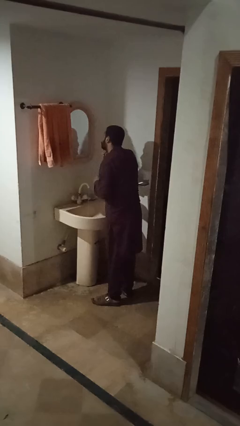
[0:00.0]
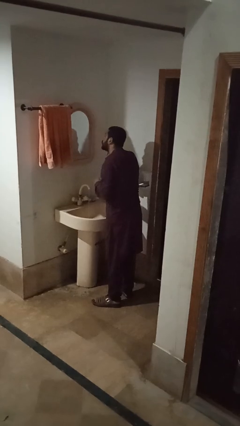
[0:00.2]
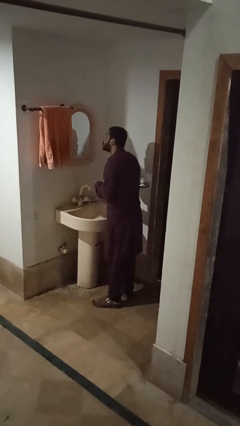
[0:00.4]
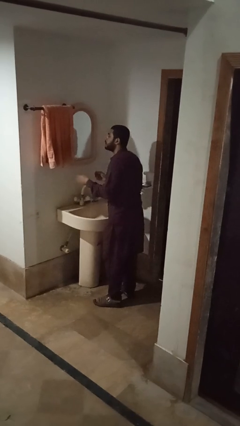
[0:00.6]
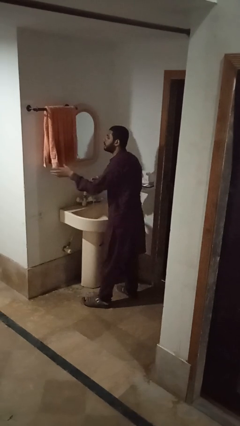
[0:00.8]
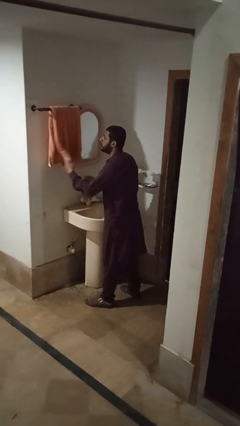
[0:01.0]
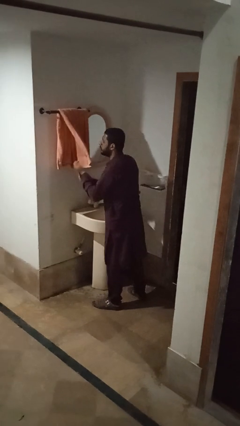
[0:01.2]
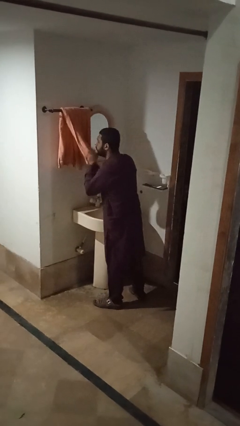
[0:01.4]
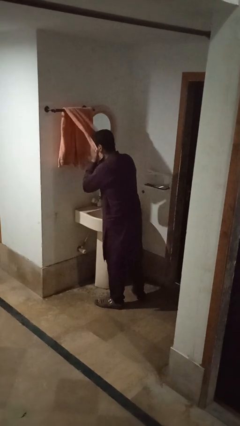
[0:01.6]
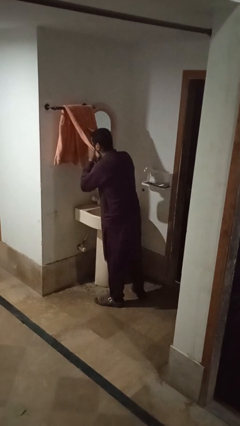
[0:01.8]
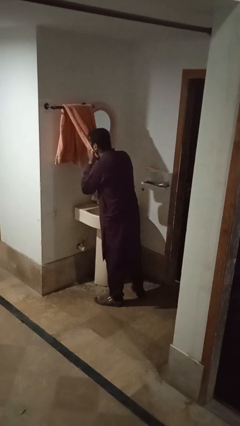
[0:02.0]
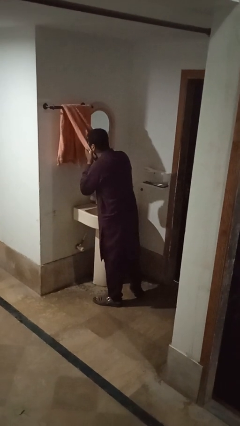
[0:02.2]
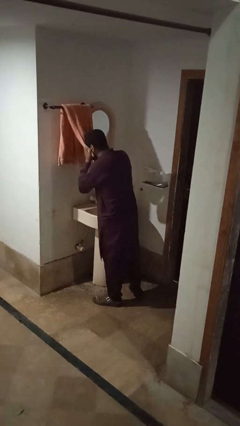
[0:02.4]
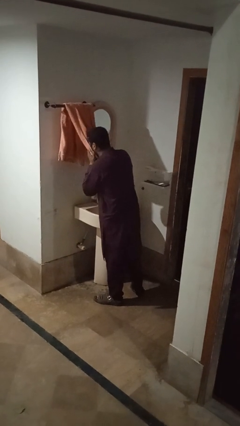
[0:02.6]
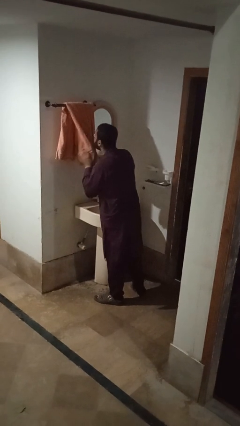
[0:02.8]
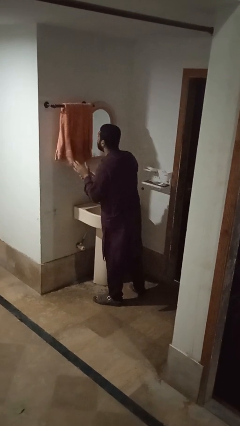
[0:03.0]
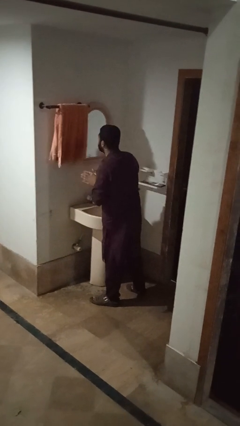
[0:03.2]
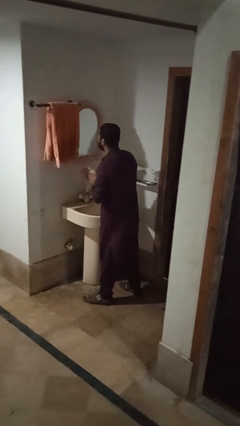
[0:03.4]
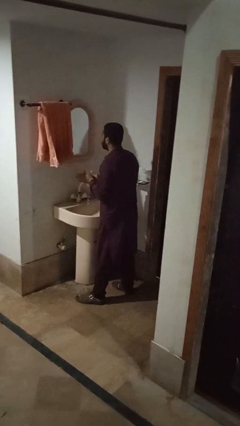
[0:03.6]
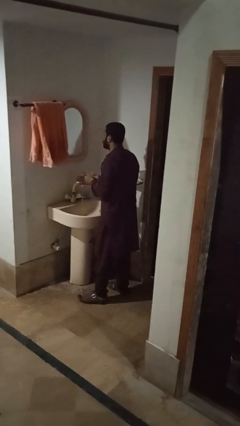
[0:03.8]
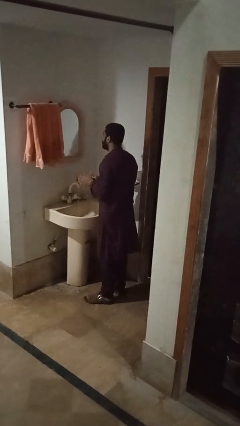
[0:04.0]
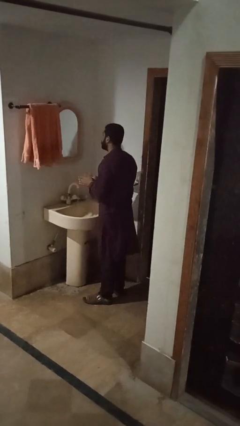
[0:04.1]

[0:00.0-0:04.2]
person dries face with towel

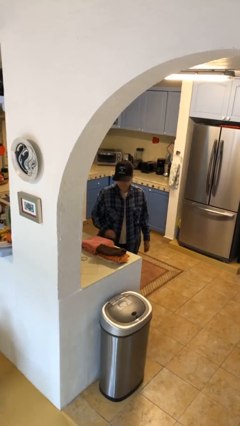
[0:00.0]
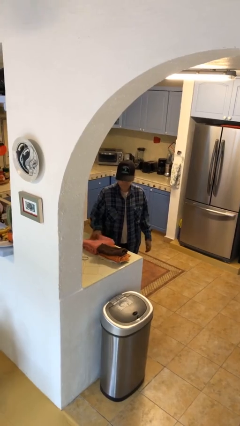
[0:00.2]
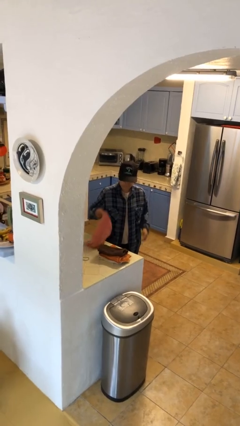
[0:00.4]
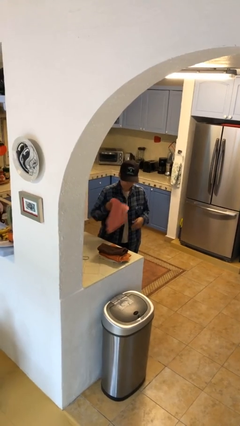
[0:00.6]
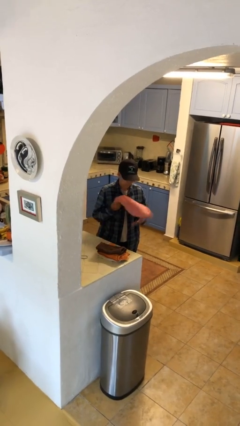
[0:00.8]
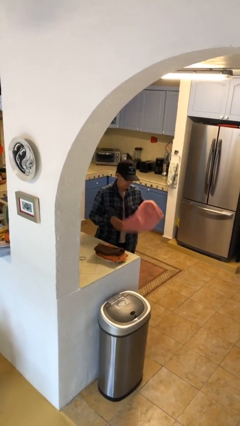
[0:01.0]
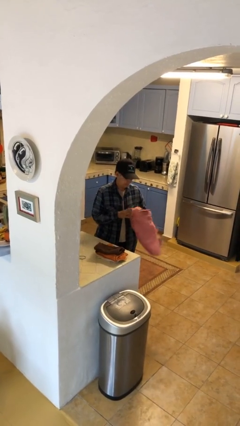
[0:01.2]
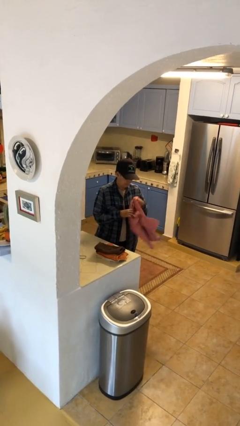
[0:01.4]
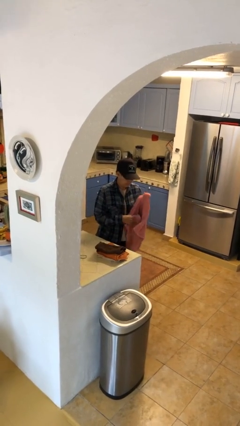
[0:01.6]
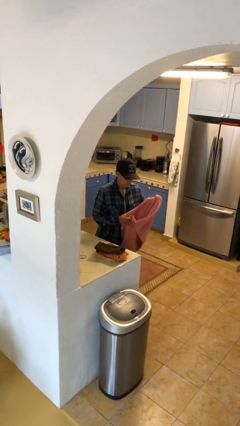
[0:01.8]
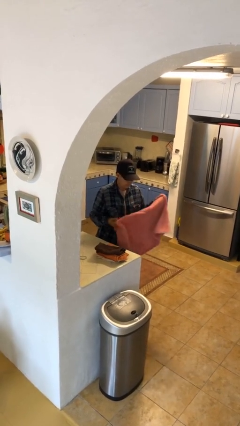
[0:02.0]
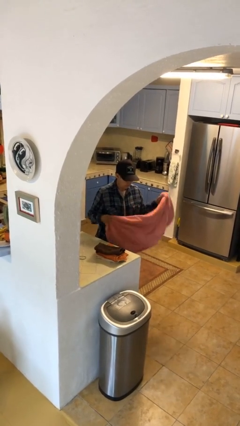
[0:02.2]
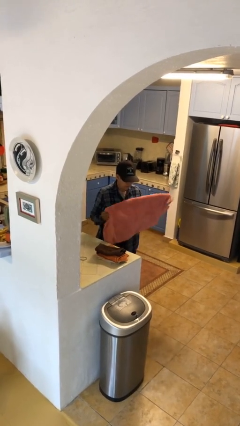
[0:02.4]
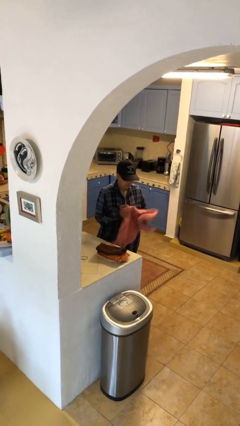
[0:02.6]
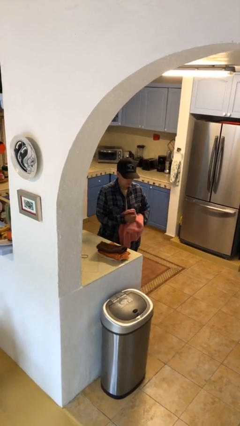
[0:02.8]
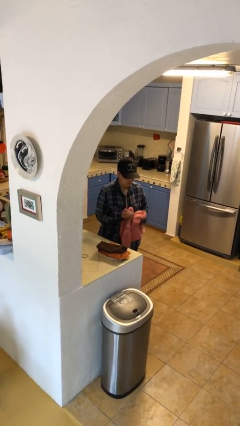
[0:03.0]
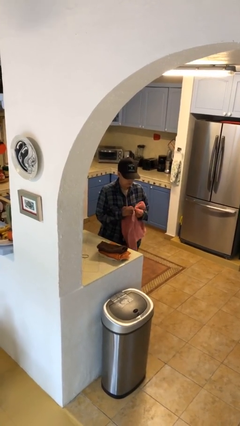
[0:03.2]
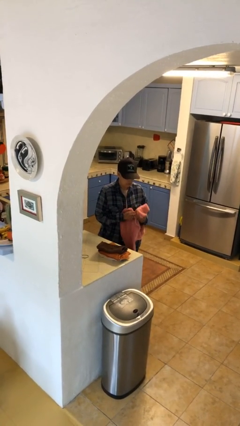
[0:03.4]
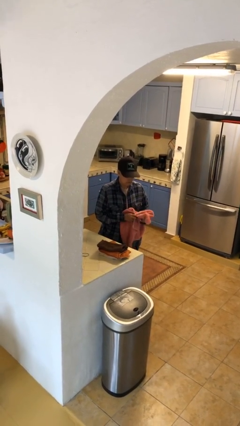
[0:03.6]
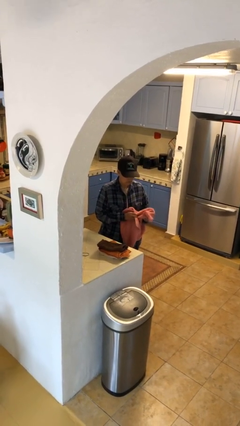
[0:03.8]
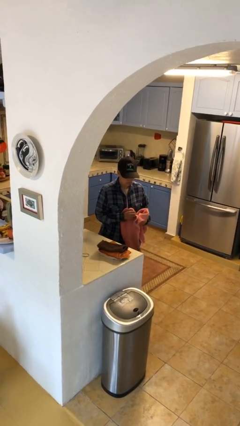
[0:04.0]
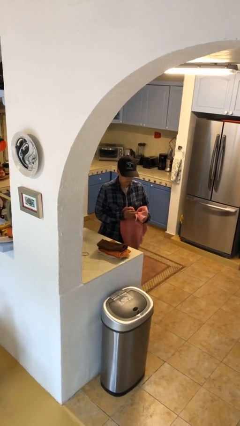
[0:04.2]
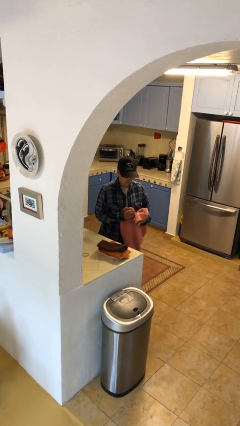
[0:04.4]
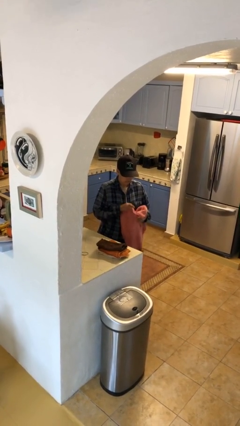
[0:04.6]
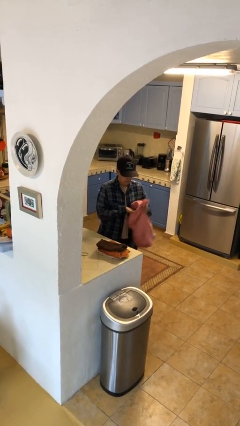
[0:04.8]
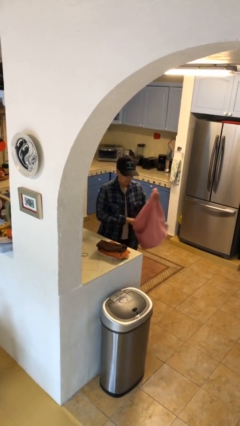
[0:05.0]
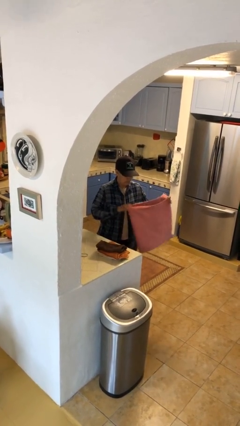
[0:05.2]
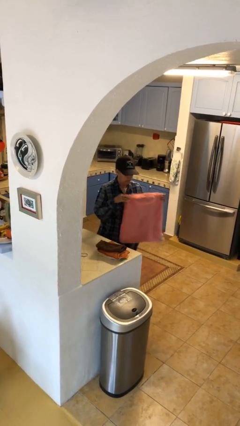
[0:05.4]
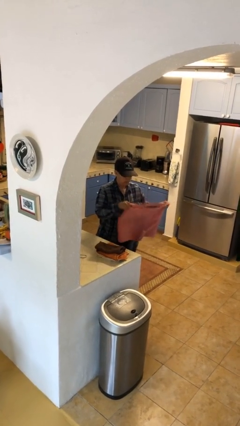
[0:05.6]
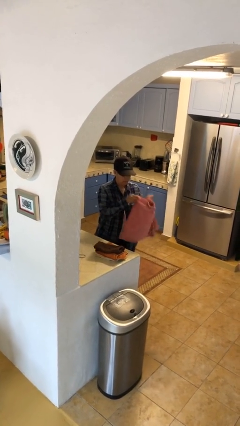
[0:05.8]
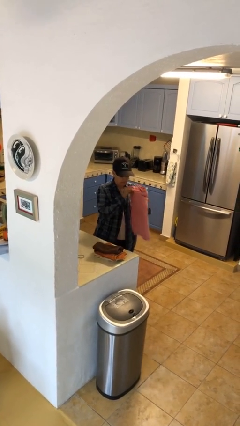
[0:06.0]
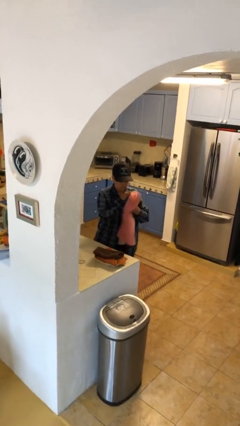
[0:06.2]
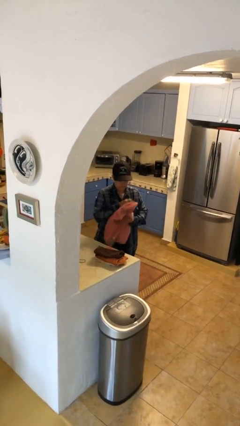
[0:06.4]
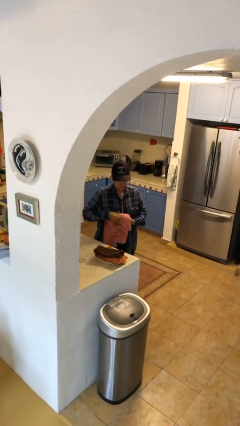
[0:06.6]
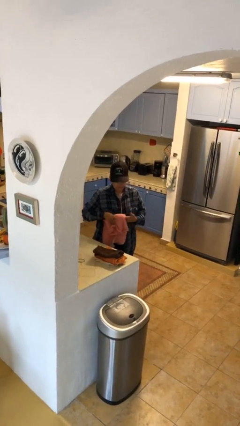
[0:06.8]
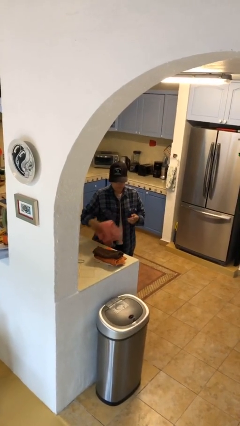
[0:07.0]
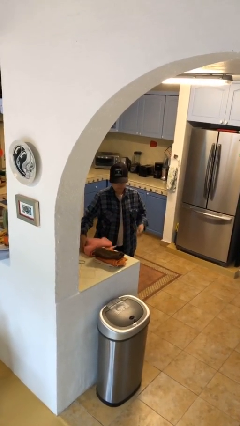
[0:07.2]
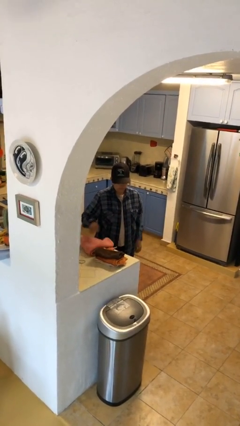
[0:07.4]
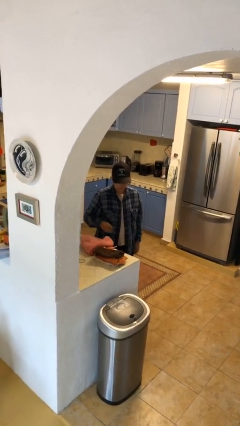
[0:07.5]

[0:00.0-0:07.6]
person folds towel

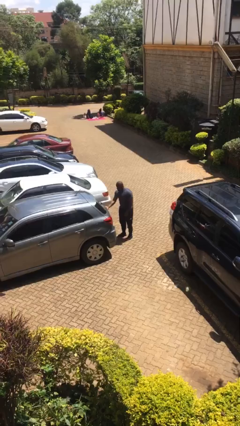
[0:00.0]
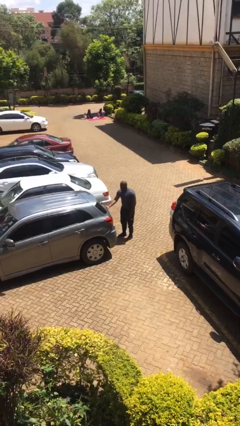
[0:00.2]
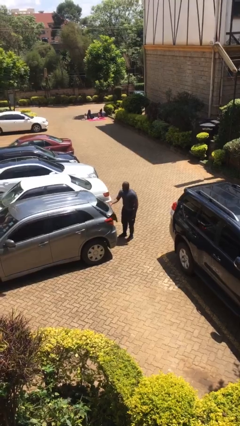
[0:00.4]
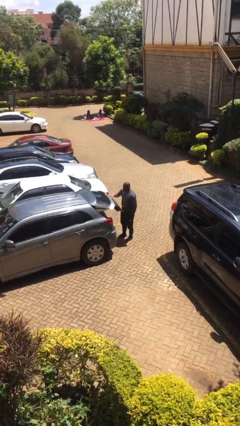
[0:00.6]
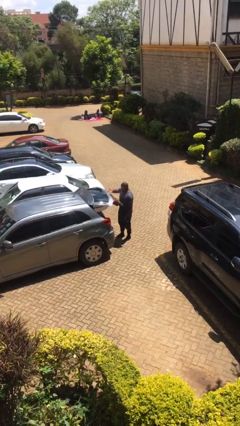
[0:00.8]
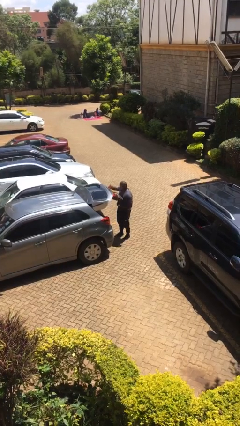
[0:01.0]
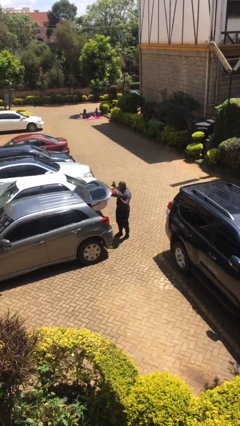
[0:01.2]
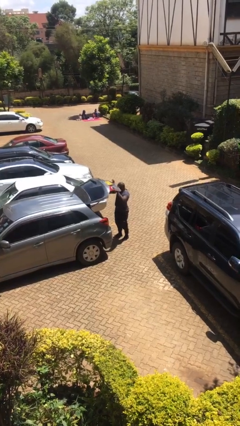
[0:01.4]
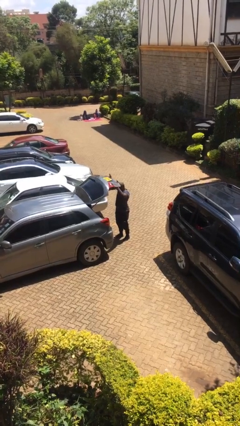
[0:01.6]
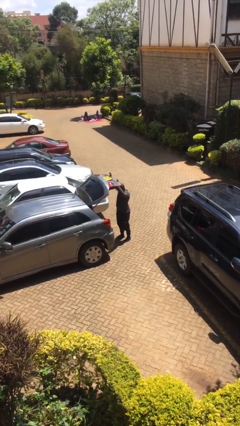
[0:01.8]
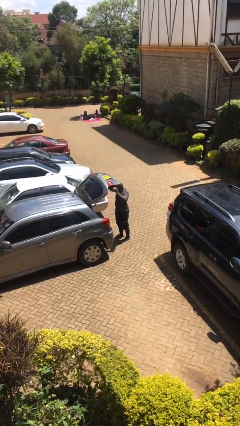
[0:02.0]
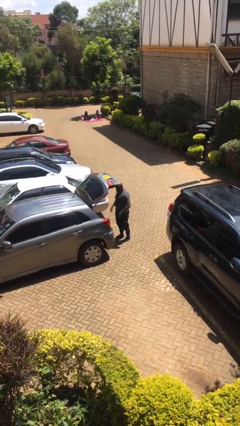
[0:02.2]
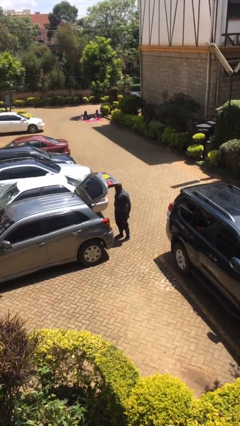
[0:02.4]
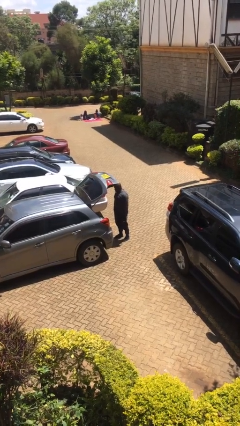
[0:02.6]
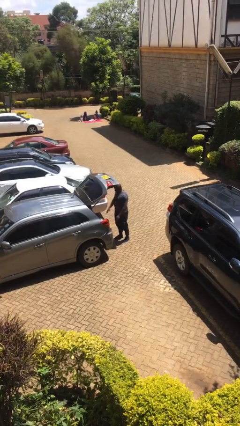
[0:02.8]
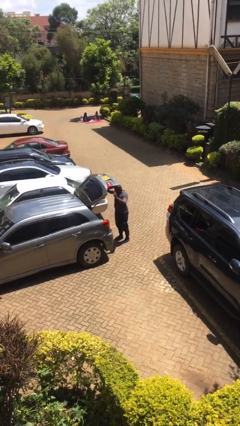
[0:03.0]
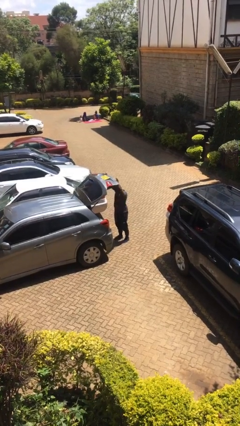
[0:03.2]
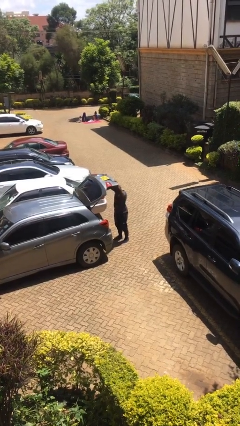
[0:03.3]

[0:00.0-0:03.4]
person opens car trunk

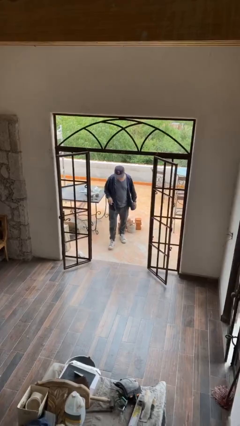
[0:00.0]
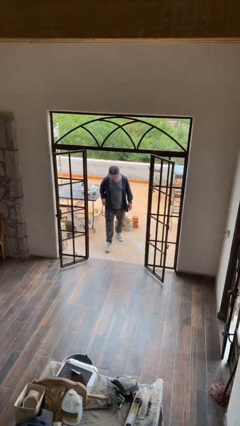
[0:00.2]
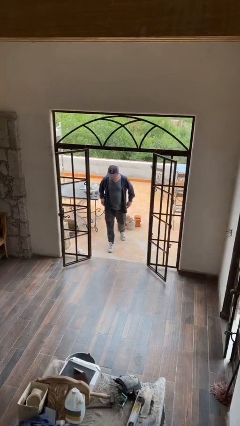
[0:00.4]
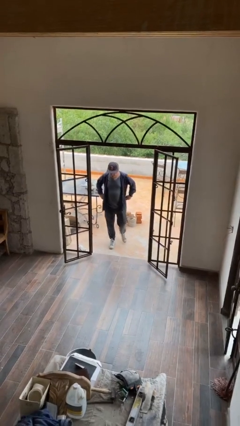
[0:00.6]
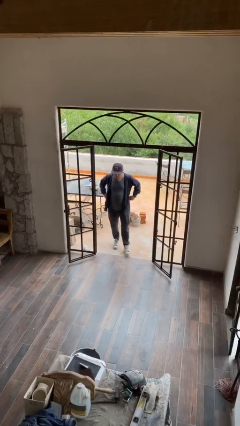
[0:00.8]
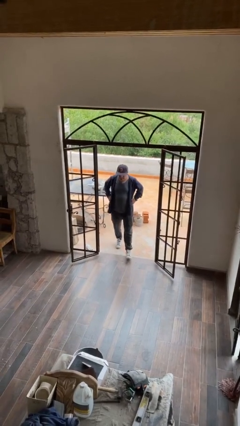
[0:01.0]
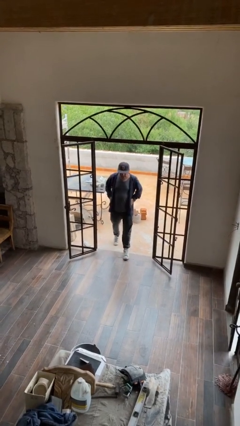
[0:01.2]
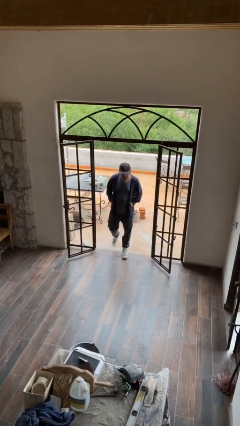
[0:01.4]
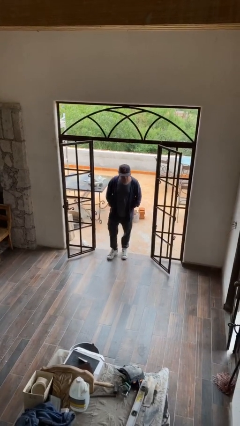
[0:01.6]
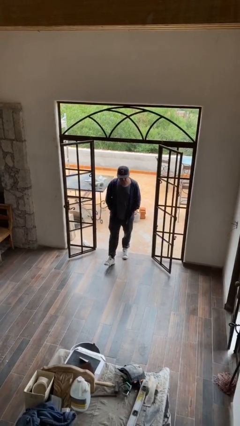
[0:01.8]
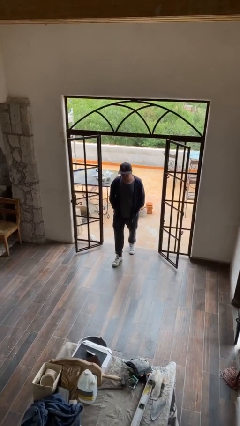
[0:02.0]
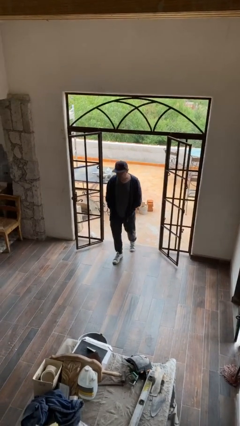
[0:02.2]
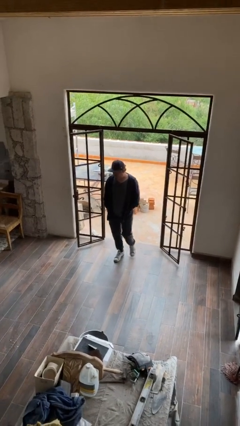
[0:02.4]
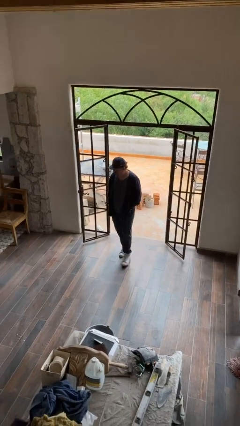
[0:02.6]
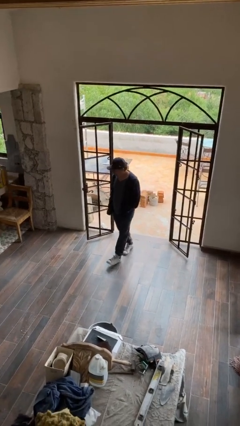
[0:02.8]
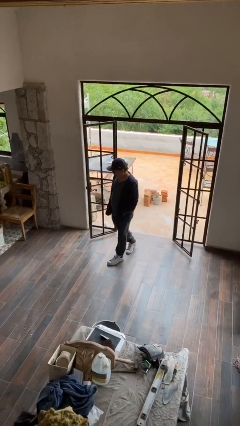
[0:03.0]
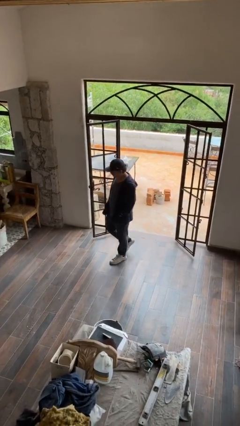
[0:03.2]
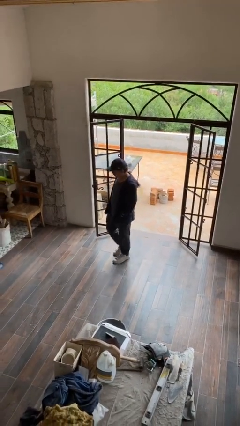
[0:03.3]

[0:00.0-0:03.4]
person enters scene through structure
